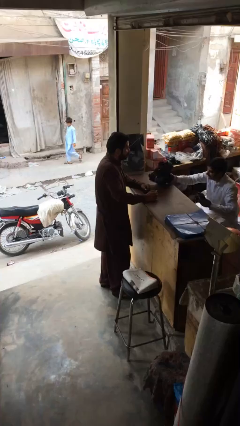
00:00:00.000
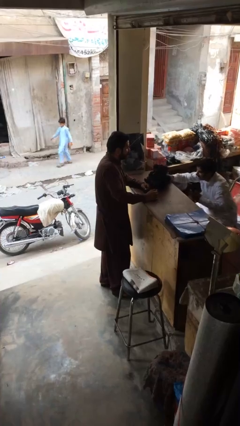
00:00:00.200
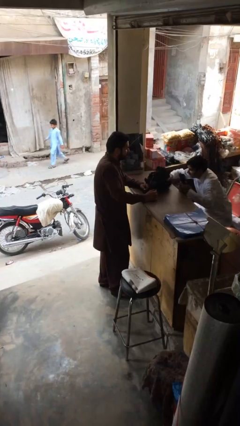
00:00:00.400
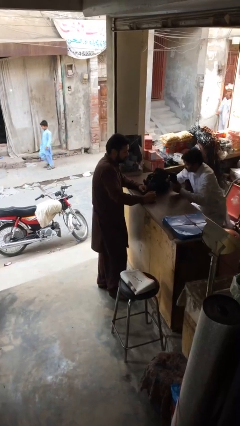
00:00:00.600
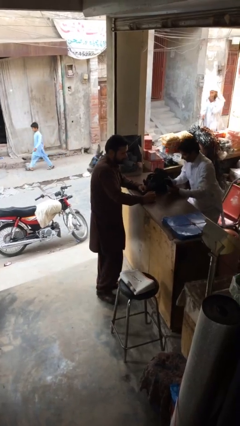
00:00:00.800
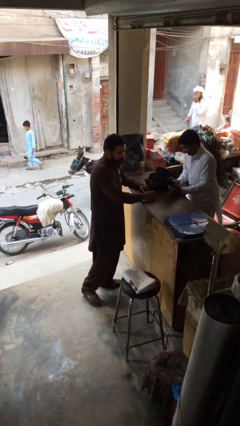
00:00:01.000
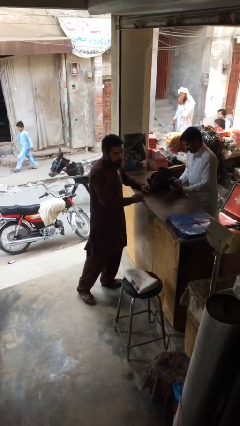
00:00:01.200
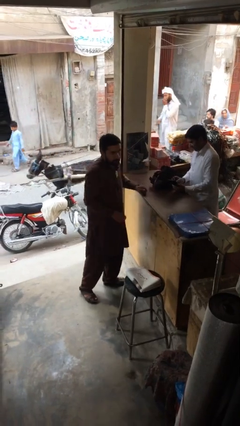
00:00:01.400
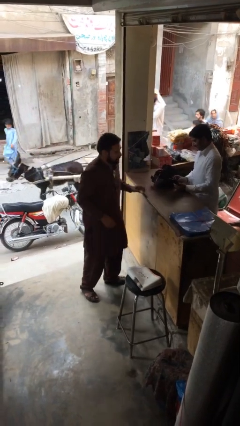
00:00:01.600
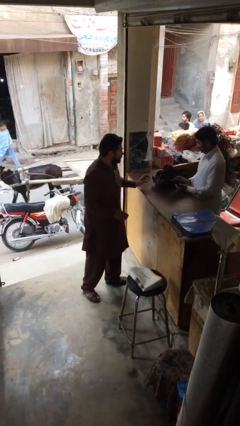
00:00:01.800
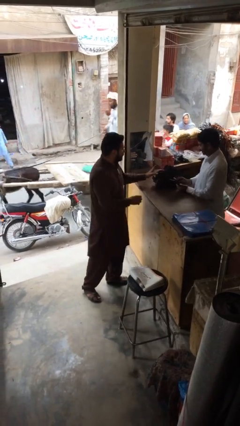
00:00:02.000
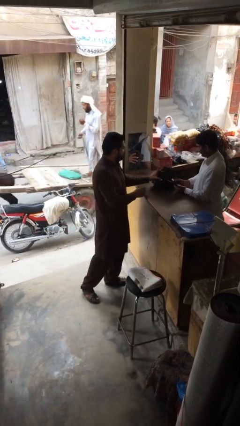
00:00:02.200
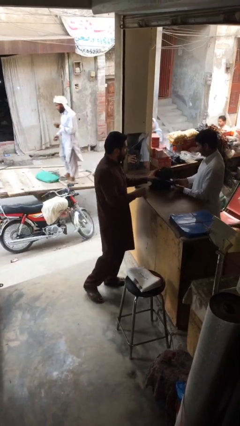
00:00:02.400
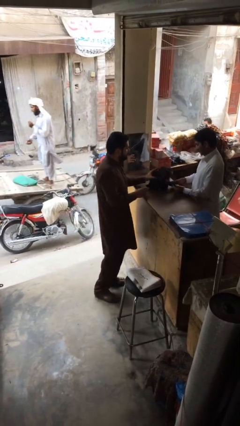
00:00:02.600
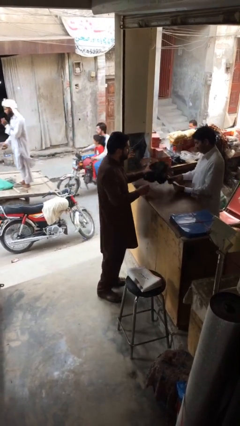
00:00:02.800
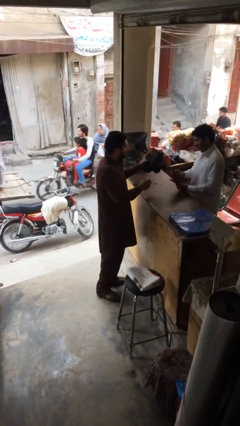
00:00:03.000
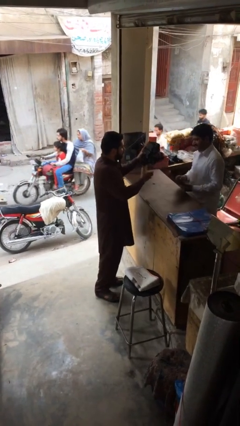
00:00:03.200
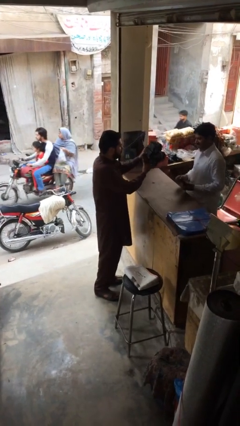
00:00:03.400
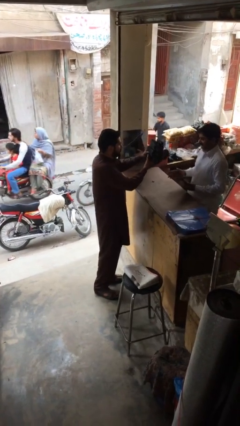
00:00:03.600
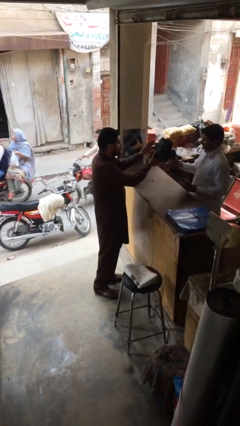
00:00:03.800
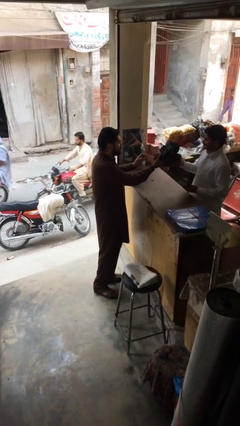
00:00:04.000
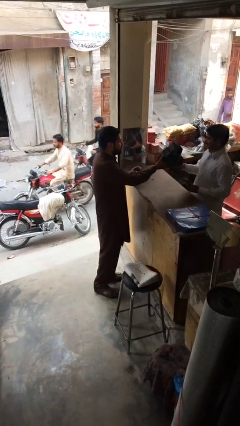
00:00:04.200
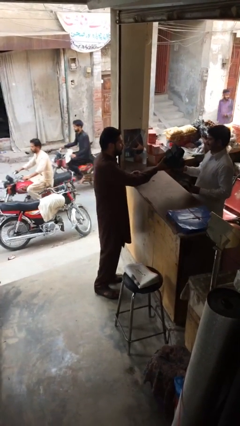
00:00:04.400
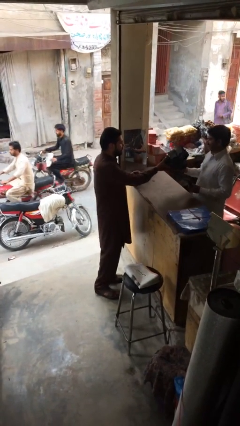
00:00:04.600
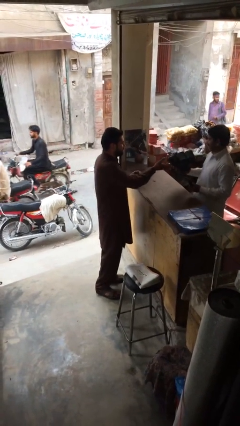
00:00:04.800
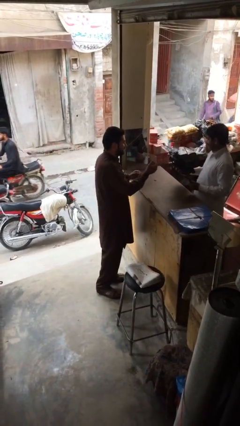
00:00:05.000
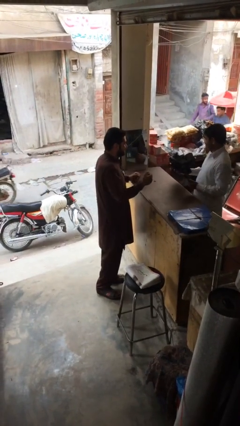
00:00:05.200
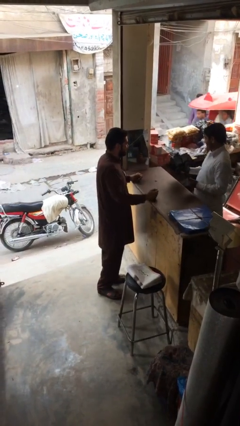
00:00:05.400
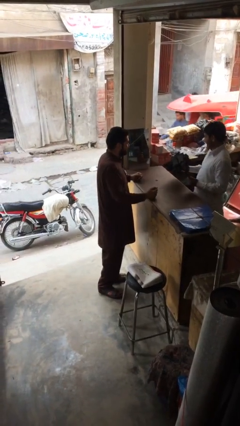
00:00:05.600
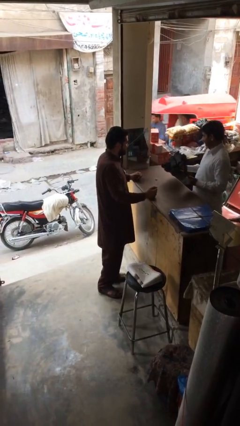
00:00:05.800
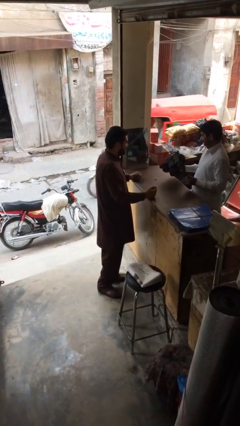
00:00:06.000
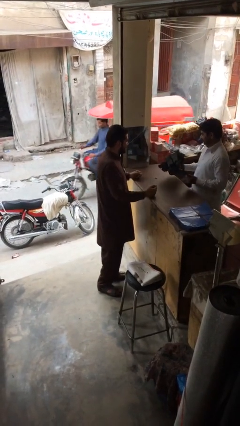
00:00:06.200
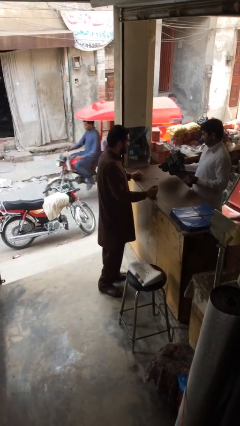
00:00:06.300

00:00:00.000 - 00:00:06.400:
person transfers object to person

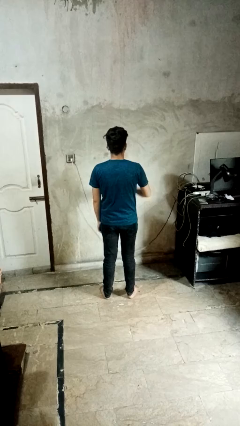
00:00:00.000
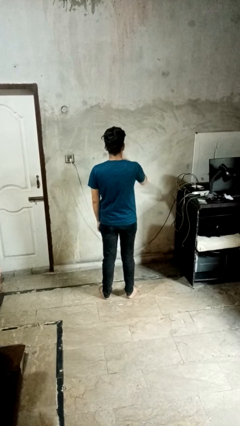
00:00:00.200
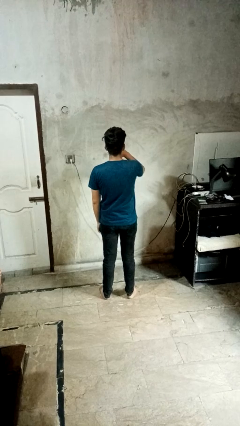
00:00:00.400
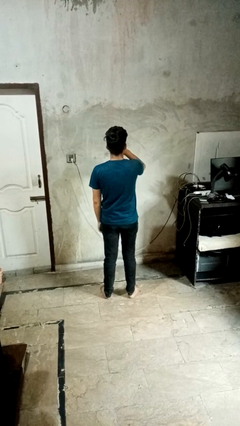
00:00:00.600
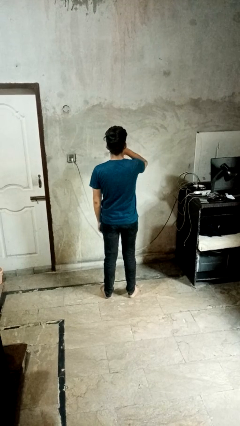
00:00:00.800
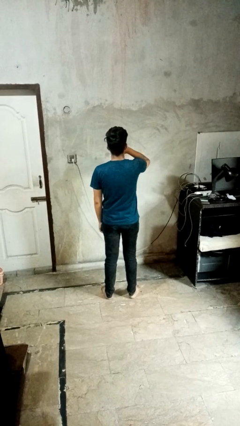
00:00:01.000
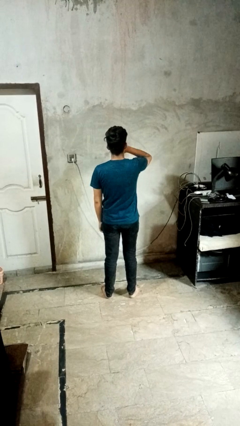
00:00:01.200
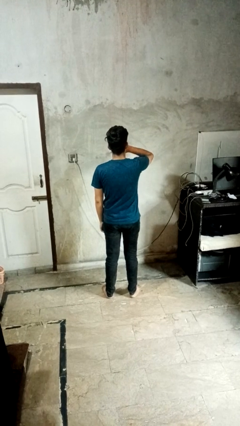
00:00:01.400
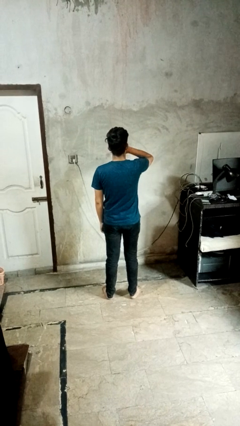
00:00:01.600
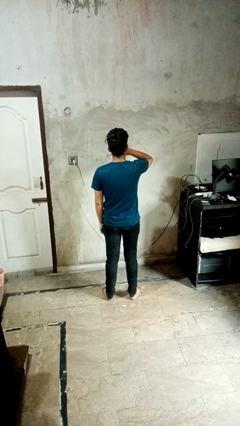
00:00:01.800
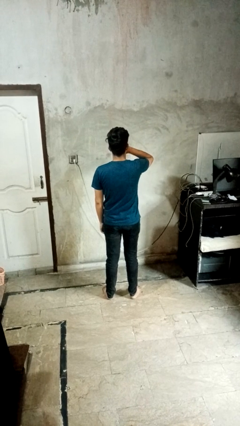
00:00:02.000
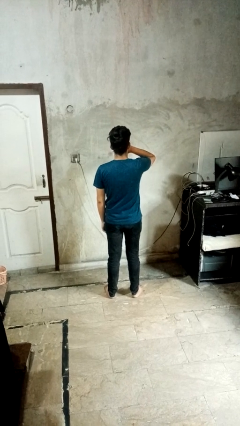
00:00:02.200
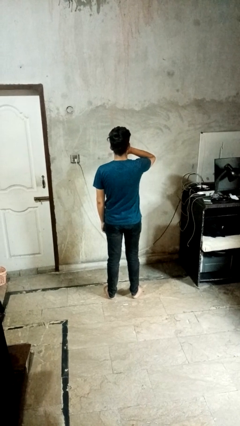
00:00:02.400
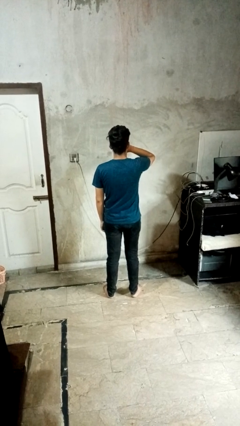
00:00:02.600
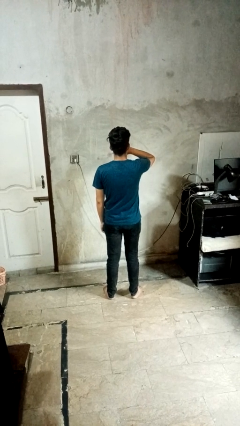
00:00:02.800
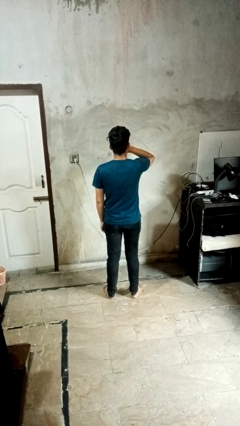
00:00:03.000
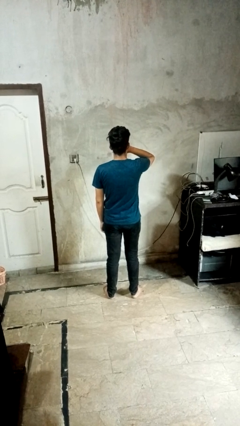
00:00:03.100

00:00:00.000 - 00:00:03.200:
person yawns

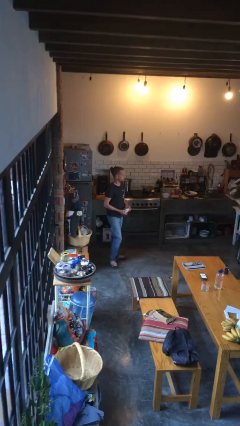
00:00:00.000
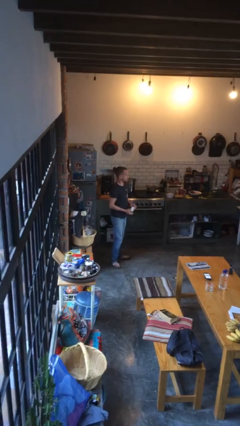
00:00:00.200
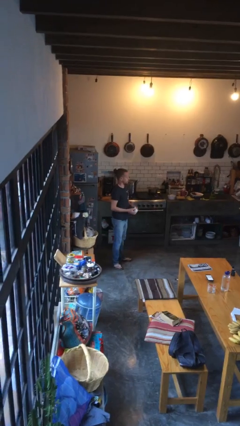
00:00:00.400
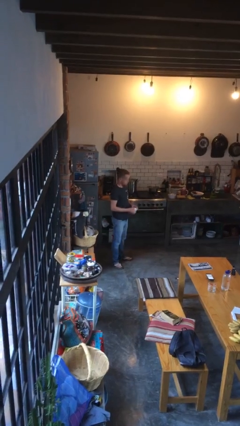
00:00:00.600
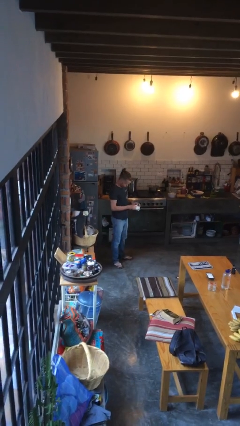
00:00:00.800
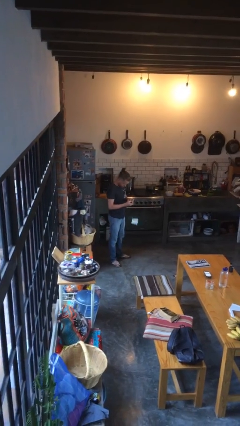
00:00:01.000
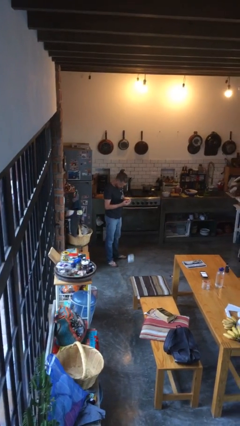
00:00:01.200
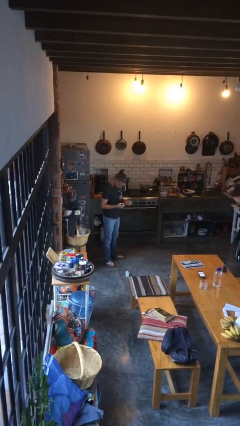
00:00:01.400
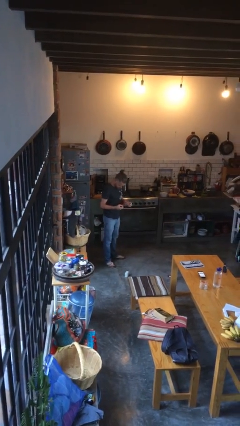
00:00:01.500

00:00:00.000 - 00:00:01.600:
person drops object

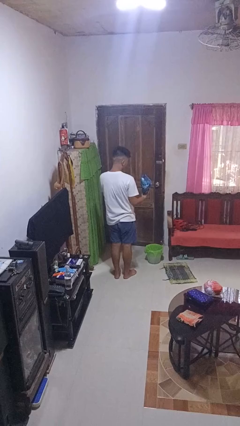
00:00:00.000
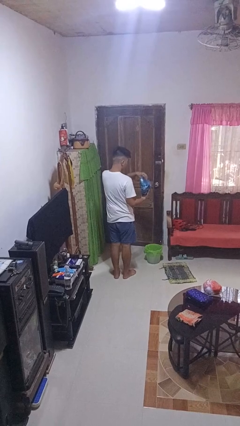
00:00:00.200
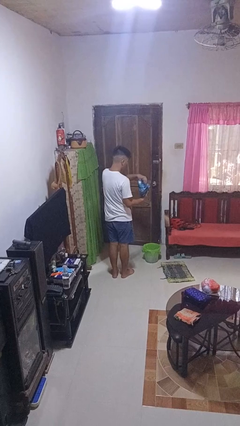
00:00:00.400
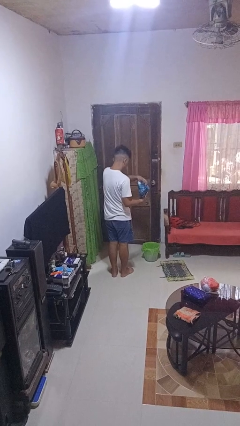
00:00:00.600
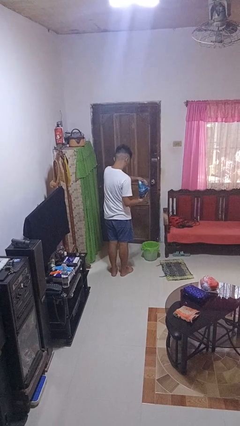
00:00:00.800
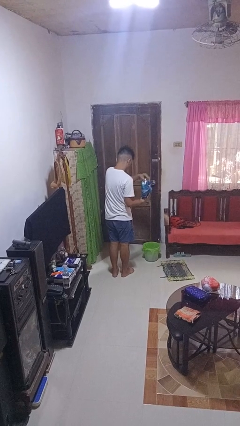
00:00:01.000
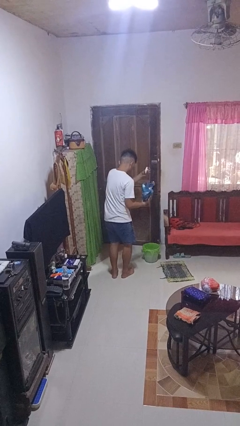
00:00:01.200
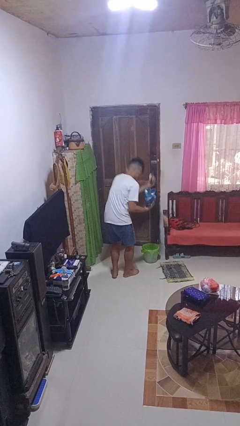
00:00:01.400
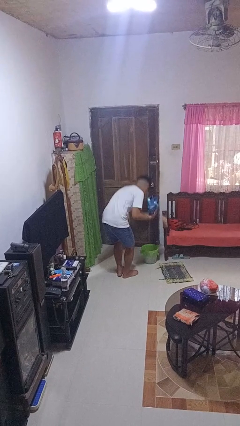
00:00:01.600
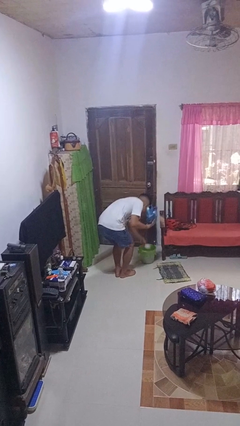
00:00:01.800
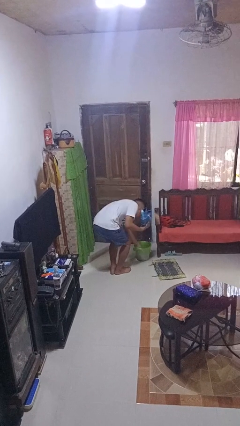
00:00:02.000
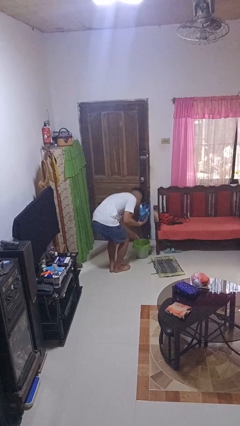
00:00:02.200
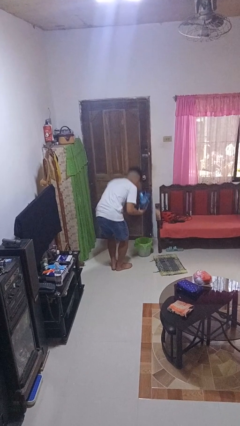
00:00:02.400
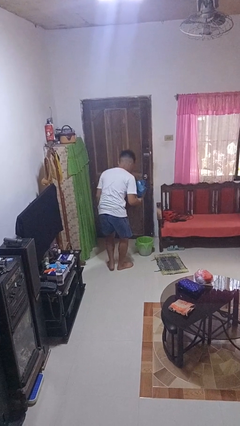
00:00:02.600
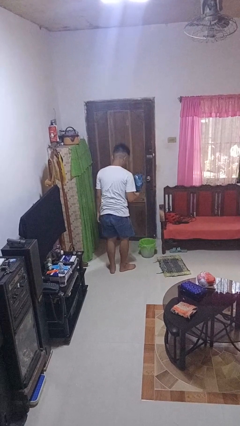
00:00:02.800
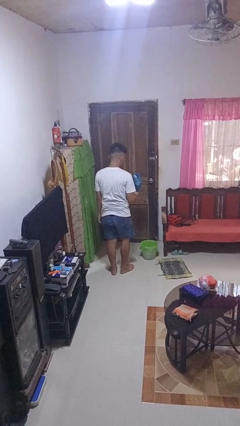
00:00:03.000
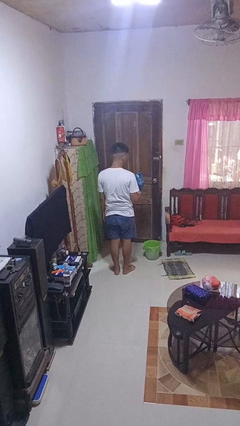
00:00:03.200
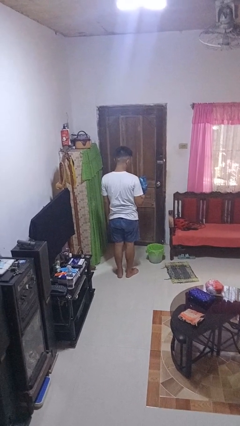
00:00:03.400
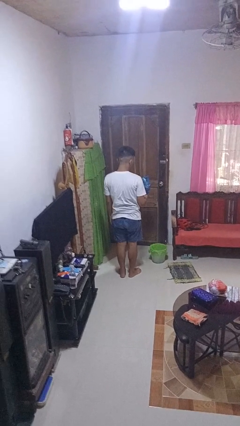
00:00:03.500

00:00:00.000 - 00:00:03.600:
person discards trash

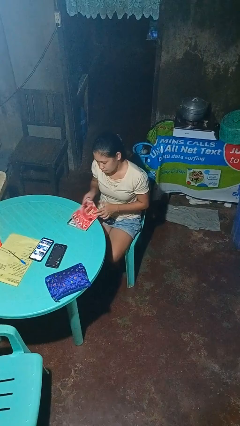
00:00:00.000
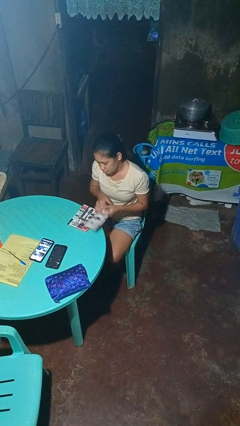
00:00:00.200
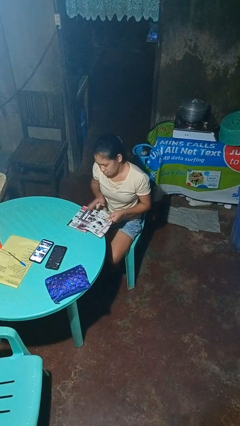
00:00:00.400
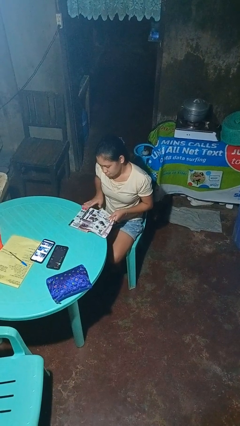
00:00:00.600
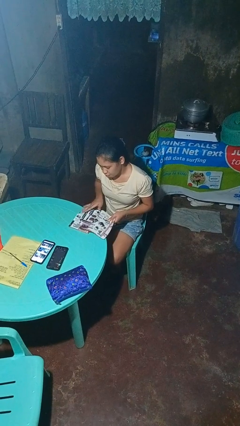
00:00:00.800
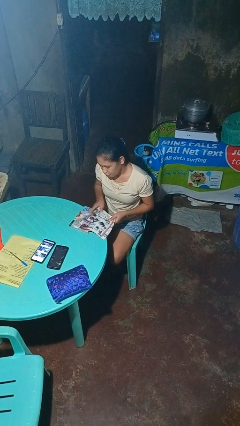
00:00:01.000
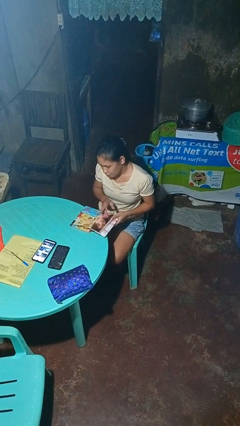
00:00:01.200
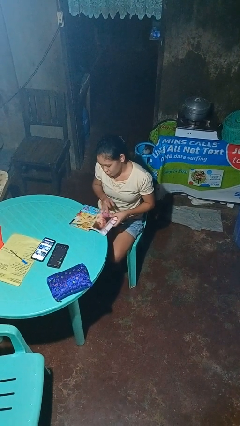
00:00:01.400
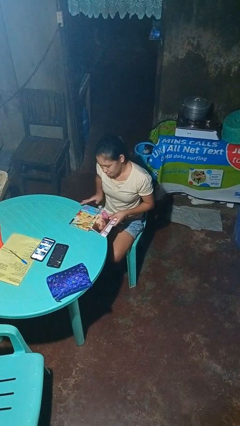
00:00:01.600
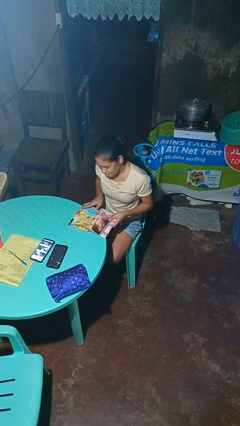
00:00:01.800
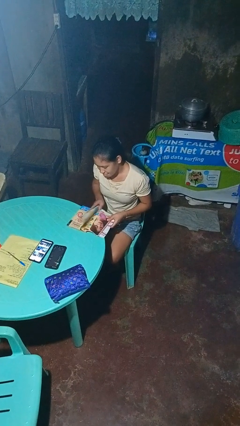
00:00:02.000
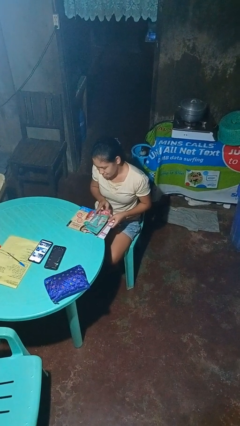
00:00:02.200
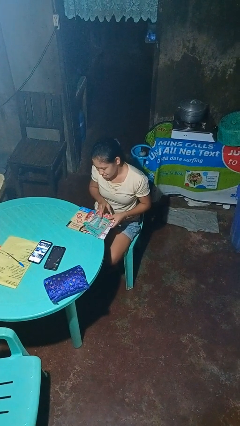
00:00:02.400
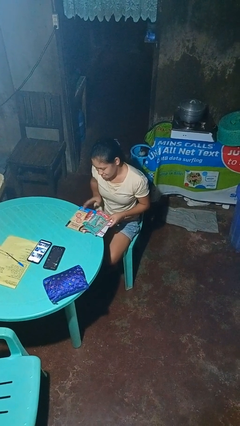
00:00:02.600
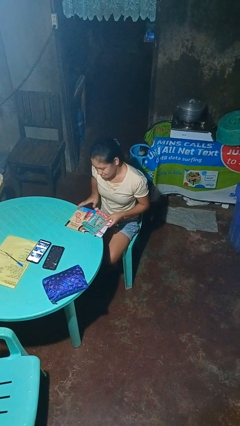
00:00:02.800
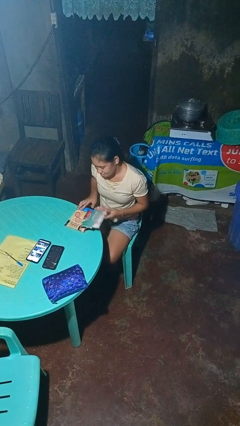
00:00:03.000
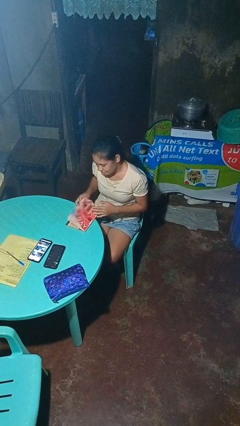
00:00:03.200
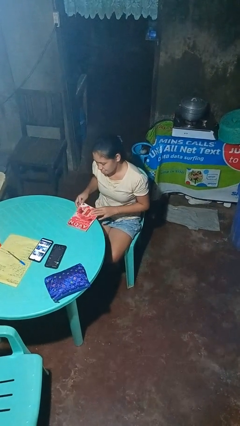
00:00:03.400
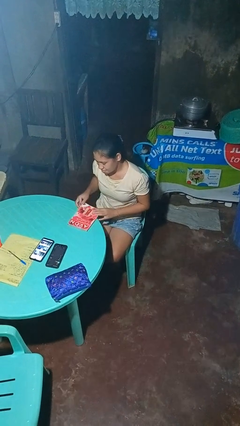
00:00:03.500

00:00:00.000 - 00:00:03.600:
person reads magazine
